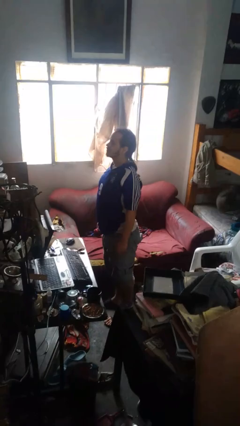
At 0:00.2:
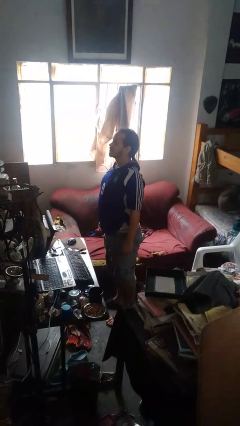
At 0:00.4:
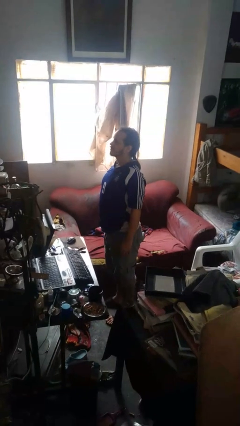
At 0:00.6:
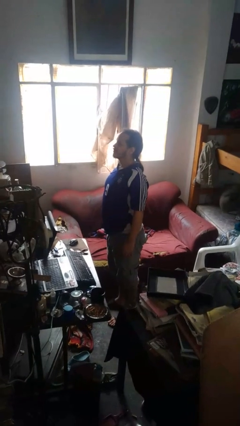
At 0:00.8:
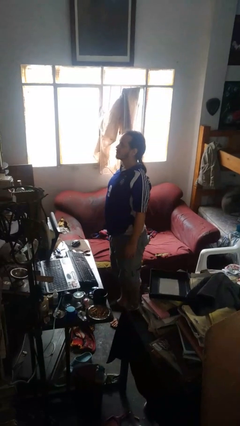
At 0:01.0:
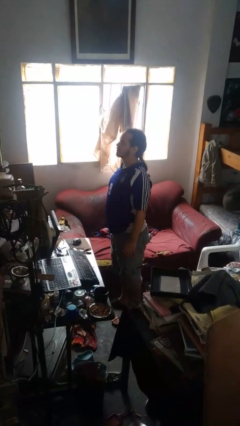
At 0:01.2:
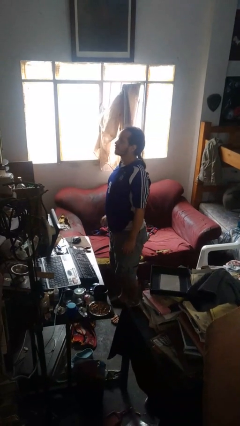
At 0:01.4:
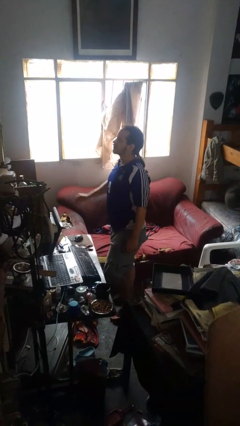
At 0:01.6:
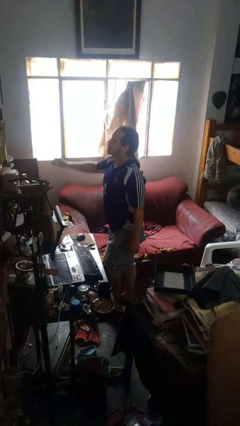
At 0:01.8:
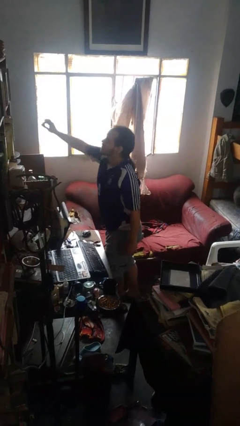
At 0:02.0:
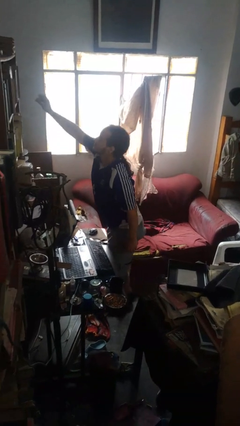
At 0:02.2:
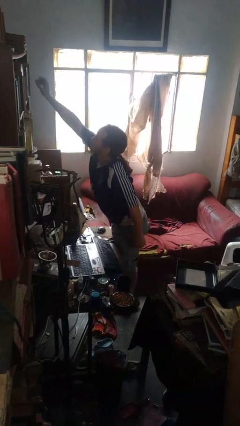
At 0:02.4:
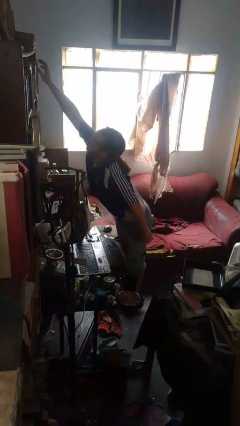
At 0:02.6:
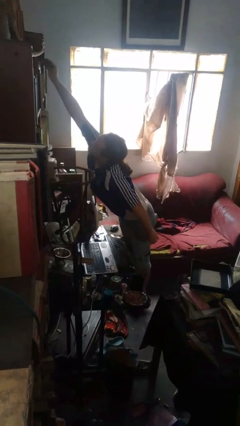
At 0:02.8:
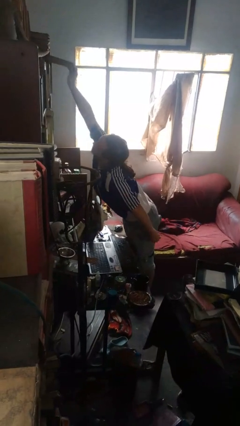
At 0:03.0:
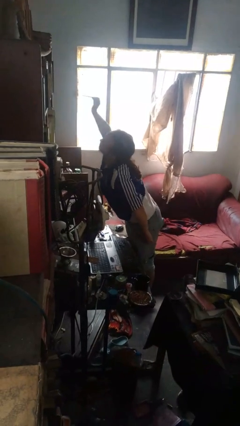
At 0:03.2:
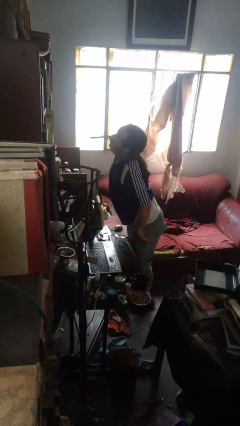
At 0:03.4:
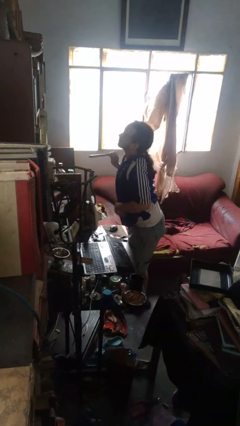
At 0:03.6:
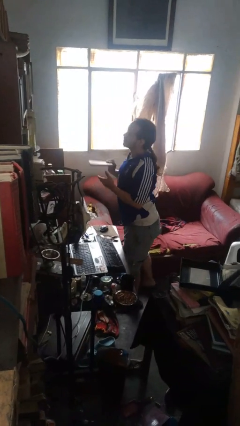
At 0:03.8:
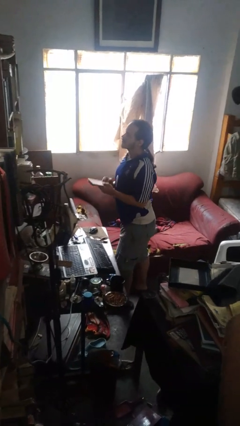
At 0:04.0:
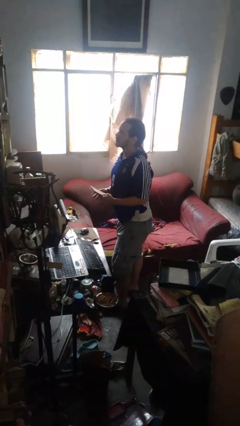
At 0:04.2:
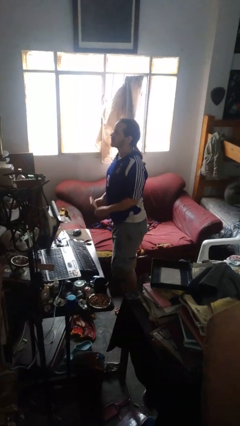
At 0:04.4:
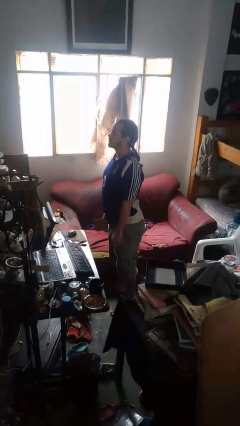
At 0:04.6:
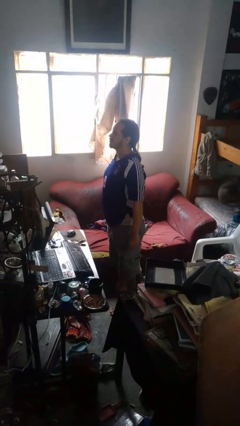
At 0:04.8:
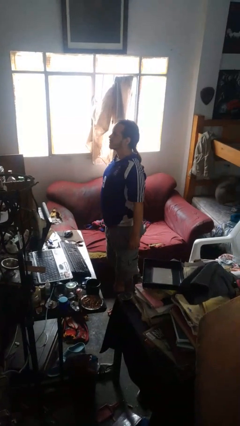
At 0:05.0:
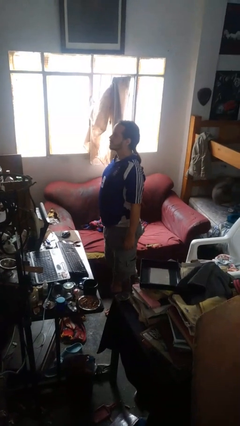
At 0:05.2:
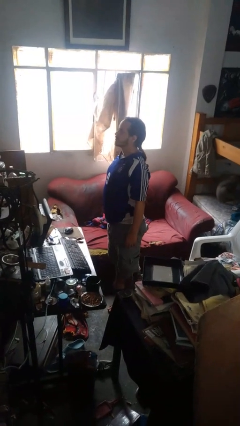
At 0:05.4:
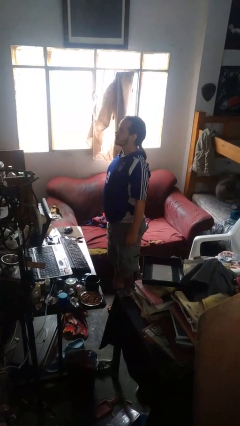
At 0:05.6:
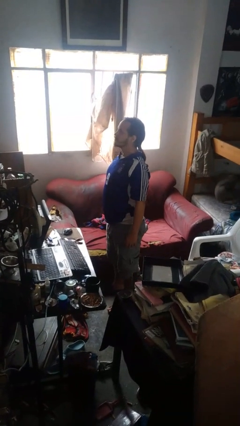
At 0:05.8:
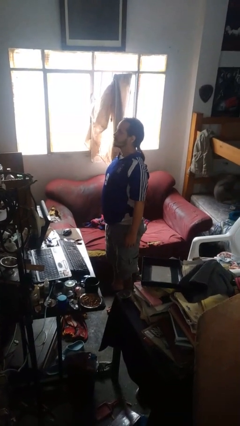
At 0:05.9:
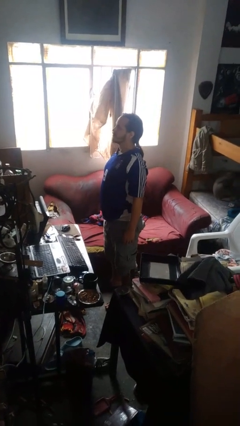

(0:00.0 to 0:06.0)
person picks up object from shelf

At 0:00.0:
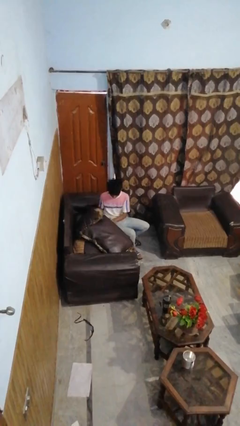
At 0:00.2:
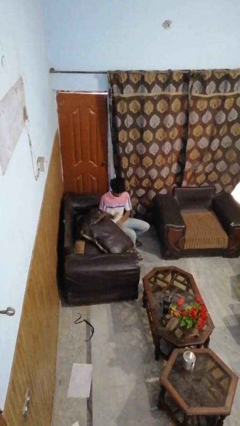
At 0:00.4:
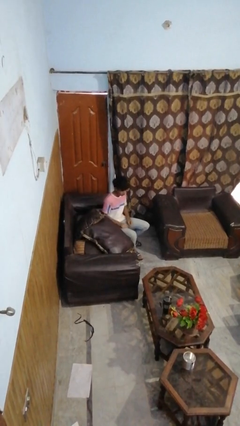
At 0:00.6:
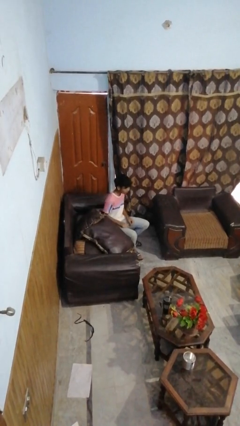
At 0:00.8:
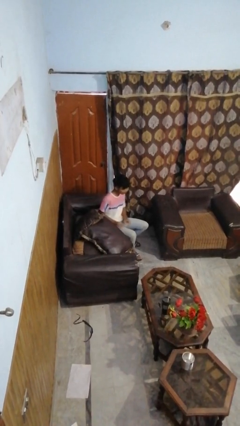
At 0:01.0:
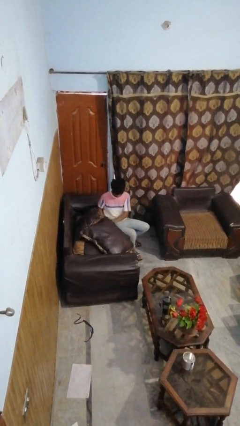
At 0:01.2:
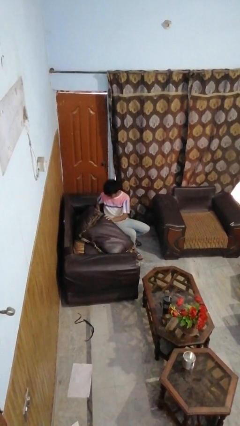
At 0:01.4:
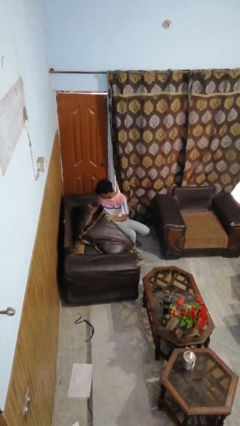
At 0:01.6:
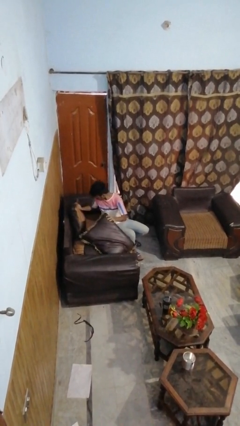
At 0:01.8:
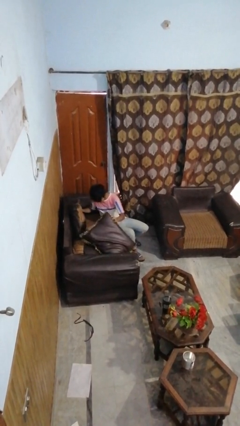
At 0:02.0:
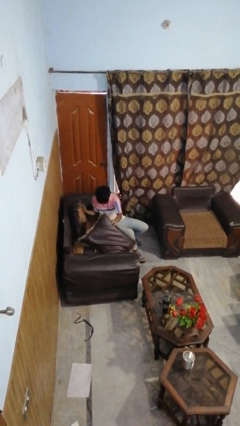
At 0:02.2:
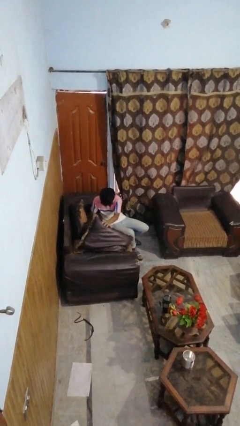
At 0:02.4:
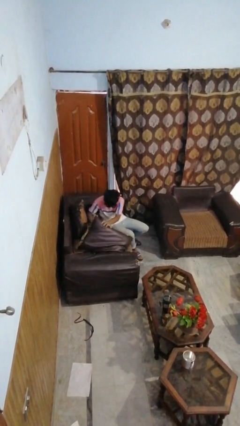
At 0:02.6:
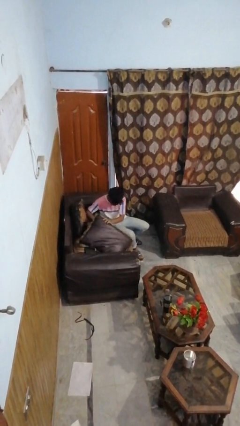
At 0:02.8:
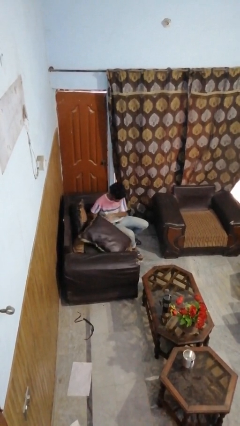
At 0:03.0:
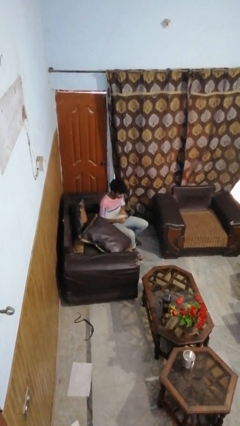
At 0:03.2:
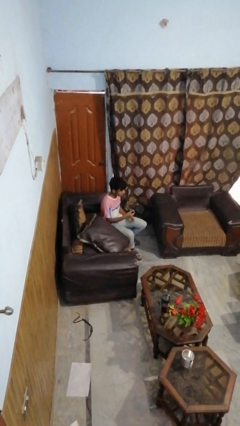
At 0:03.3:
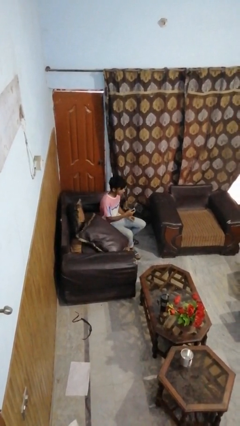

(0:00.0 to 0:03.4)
person searches in couch

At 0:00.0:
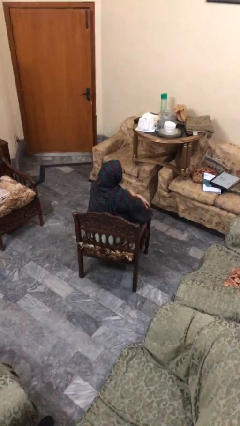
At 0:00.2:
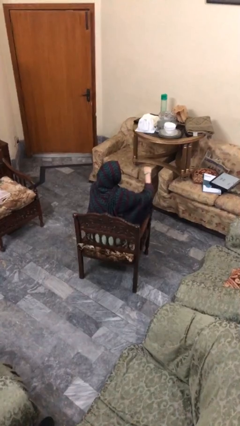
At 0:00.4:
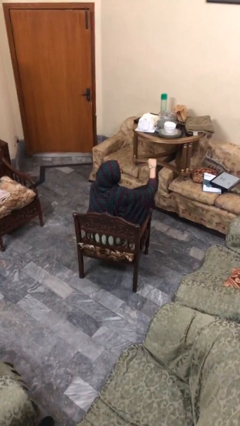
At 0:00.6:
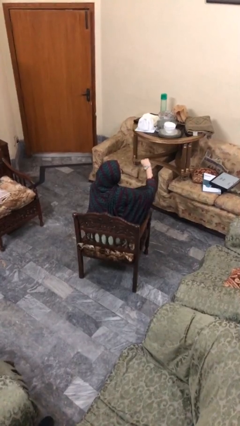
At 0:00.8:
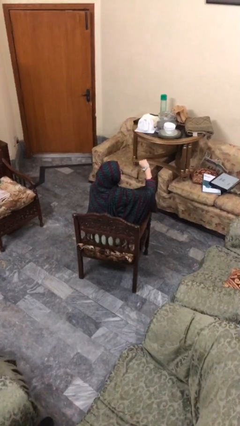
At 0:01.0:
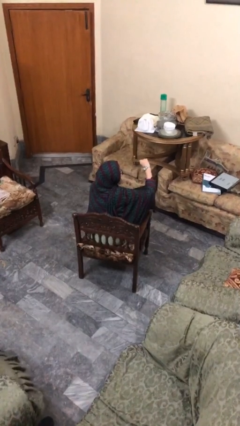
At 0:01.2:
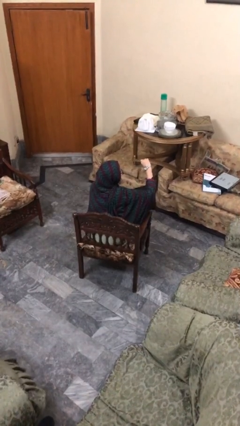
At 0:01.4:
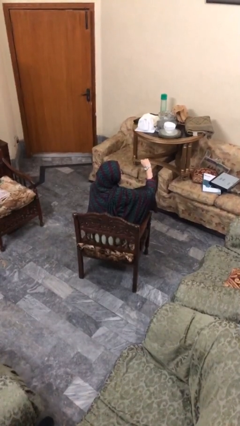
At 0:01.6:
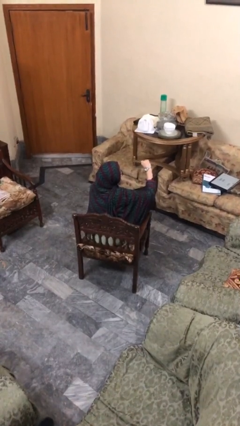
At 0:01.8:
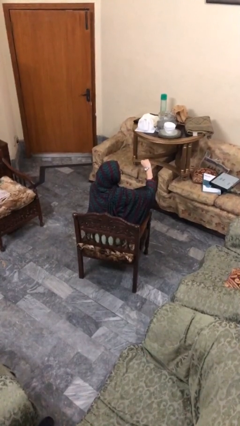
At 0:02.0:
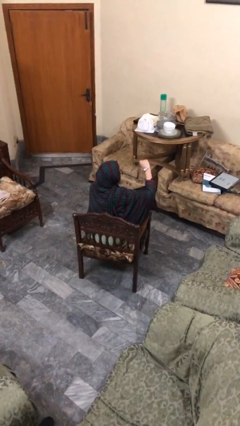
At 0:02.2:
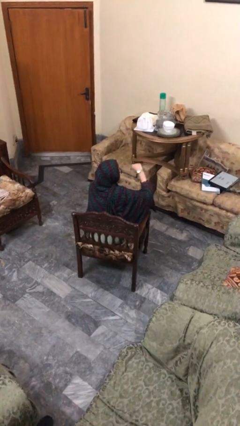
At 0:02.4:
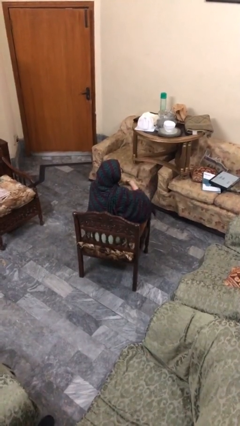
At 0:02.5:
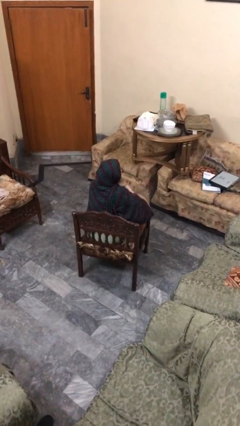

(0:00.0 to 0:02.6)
person looks at wristwatch

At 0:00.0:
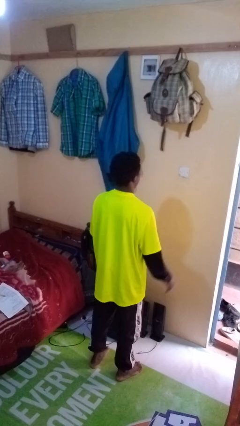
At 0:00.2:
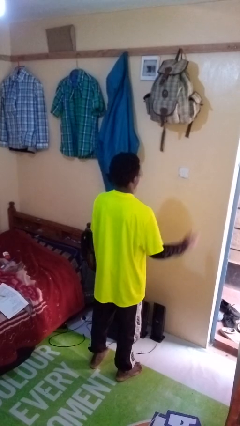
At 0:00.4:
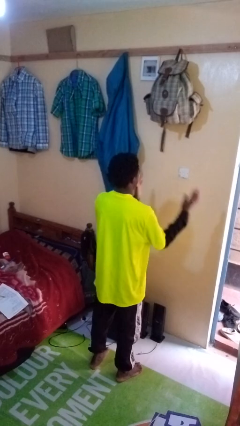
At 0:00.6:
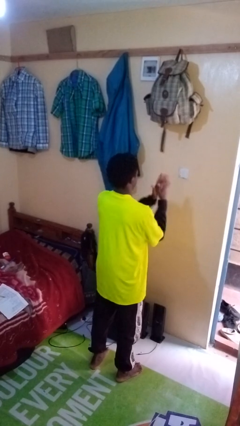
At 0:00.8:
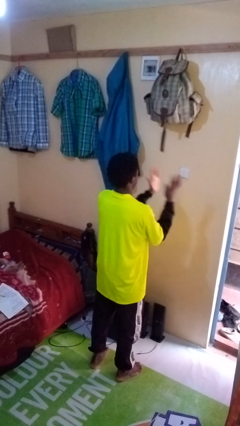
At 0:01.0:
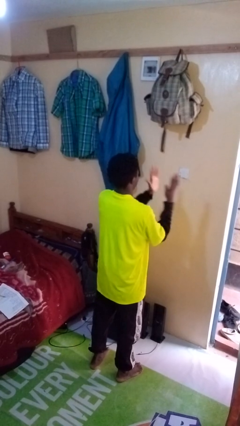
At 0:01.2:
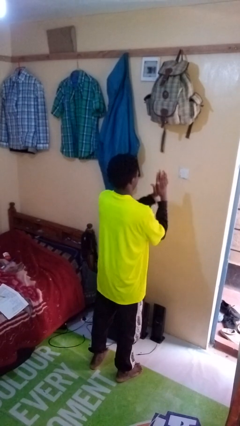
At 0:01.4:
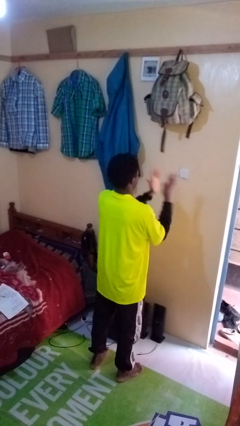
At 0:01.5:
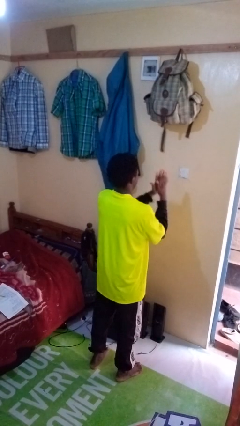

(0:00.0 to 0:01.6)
person claps hands

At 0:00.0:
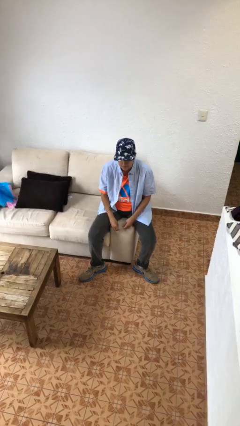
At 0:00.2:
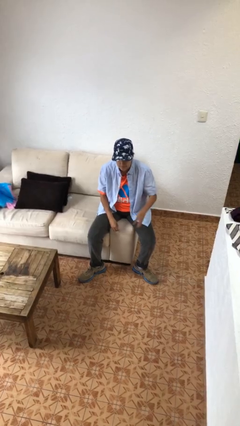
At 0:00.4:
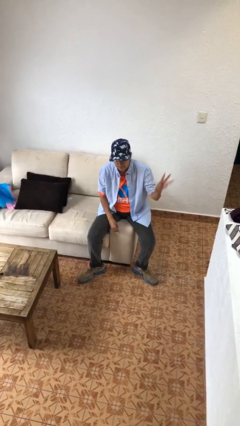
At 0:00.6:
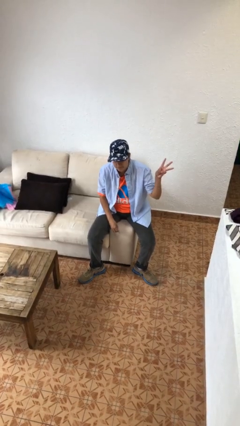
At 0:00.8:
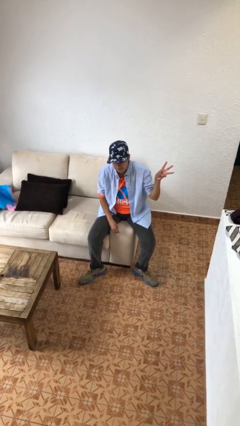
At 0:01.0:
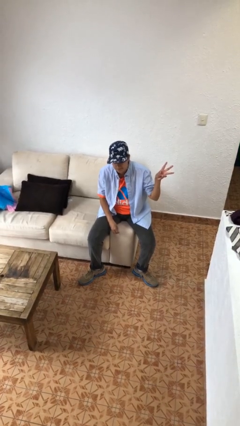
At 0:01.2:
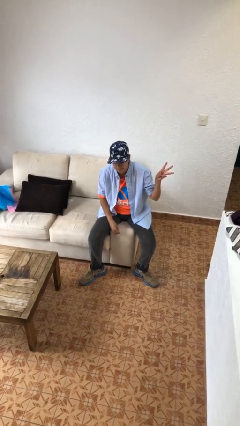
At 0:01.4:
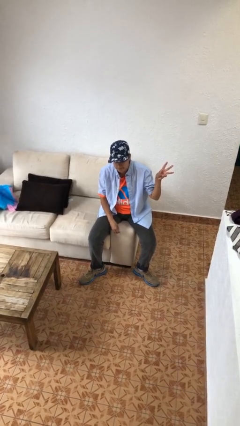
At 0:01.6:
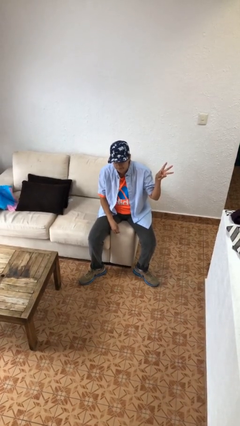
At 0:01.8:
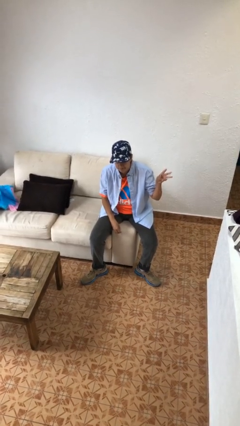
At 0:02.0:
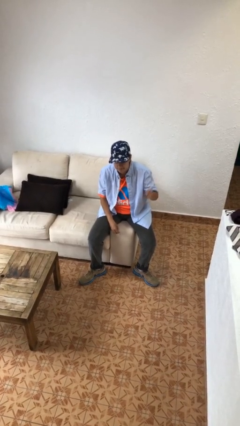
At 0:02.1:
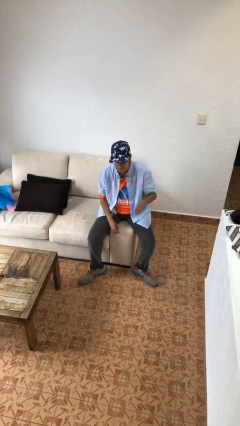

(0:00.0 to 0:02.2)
person gestures number three

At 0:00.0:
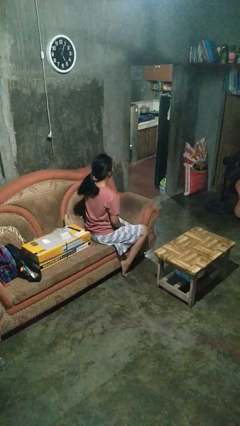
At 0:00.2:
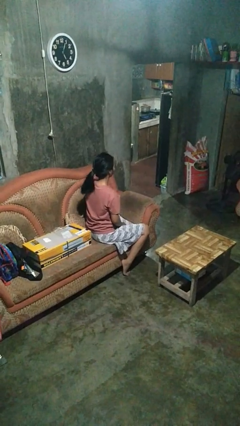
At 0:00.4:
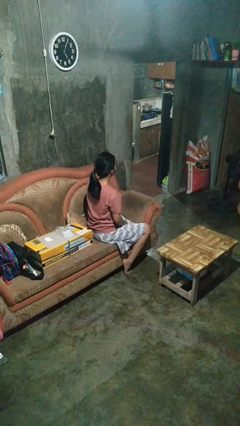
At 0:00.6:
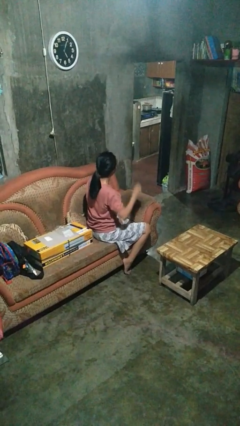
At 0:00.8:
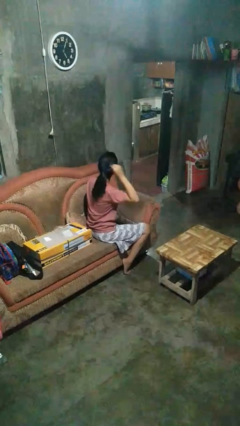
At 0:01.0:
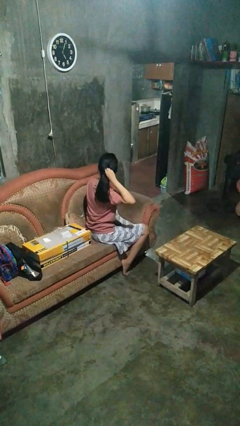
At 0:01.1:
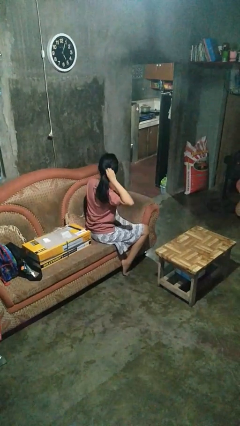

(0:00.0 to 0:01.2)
person takes off hairtie

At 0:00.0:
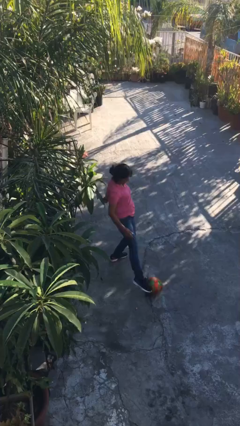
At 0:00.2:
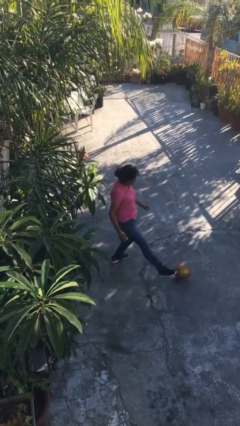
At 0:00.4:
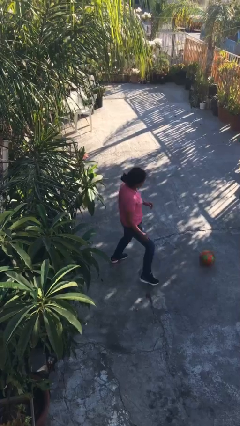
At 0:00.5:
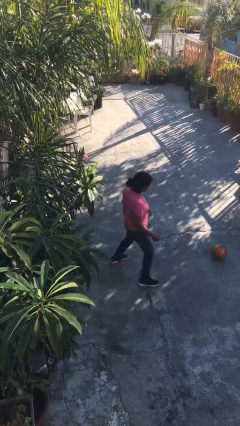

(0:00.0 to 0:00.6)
person kicks object to person
